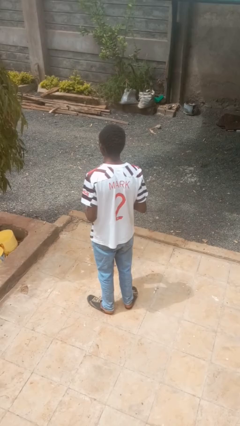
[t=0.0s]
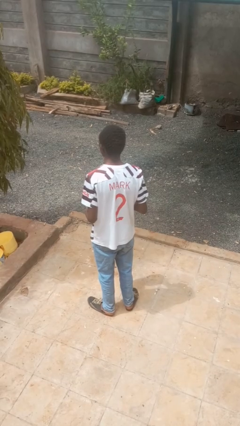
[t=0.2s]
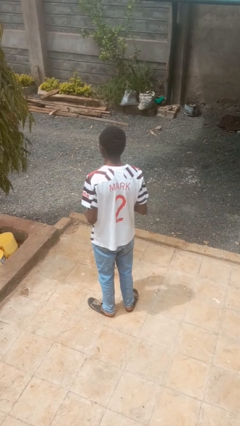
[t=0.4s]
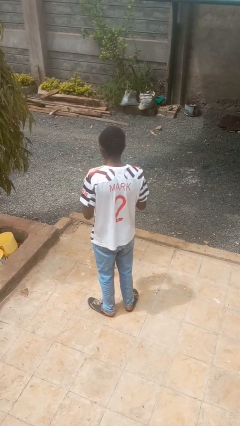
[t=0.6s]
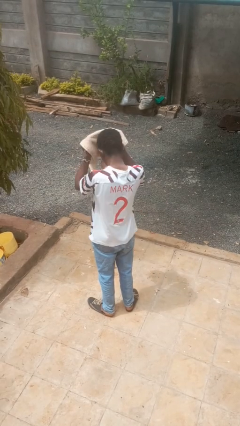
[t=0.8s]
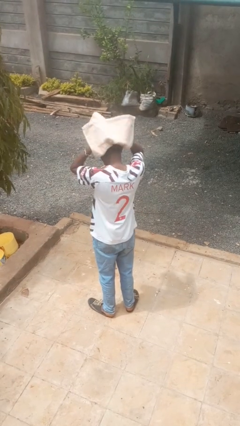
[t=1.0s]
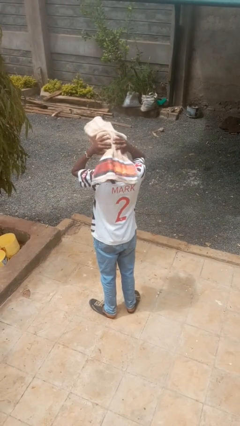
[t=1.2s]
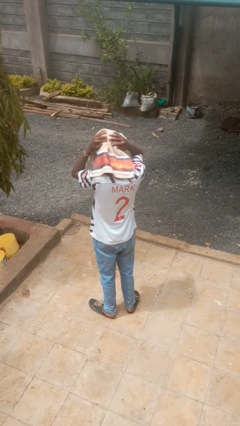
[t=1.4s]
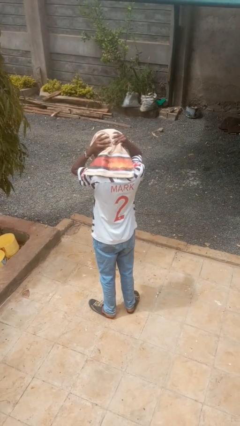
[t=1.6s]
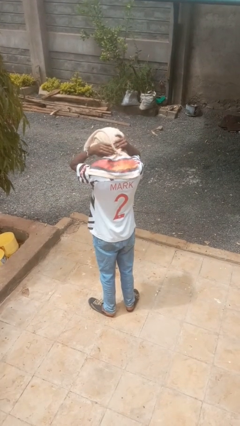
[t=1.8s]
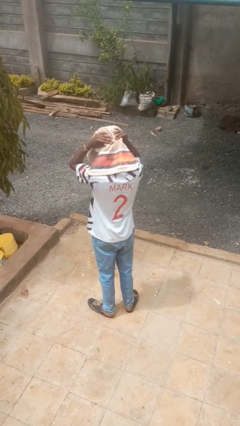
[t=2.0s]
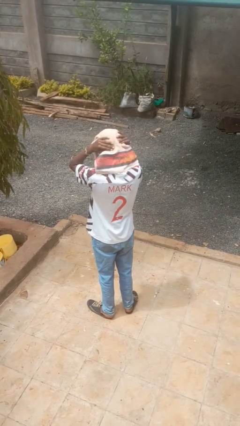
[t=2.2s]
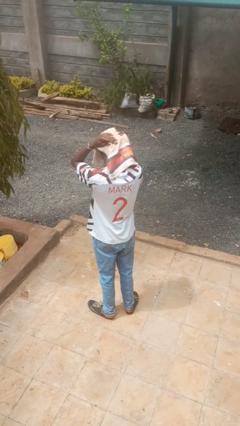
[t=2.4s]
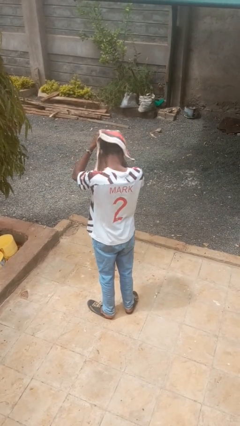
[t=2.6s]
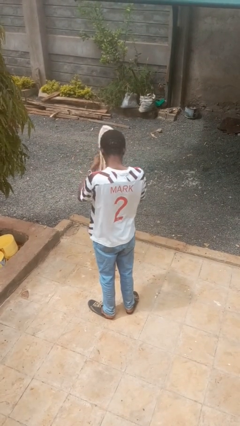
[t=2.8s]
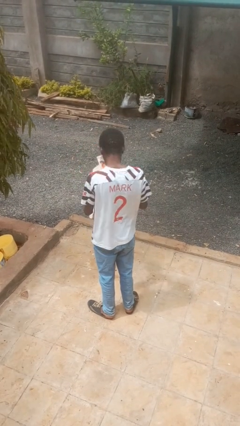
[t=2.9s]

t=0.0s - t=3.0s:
person dries hair with towel

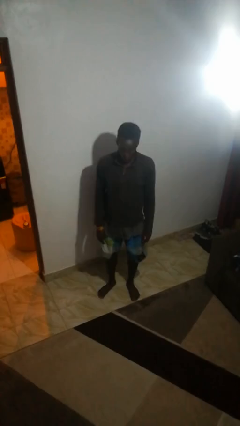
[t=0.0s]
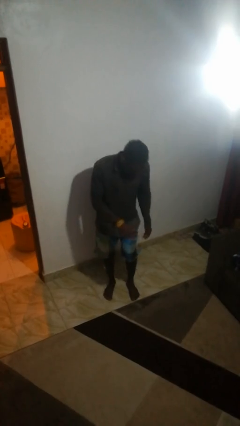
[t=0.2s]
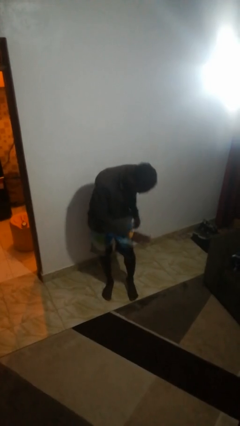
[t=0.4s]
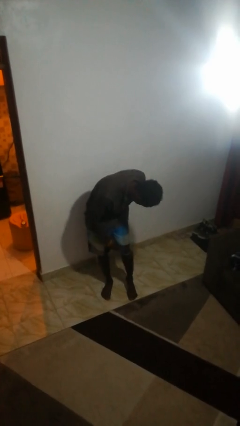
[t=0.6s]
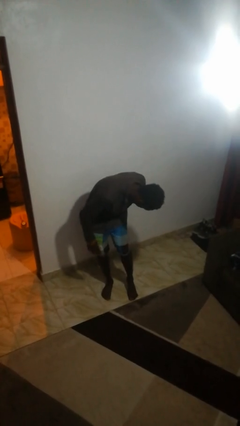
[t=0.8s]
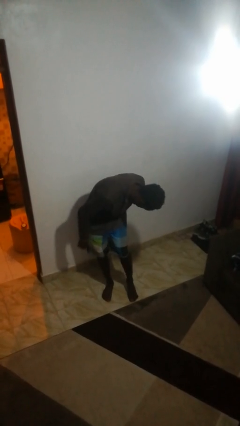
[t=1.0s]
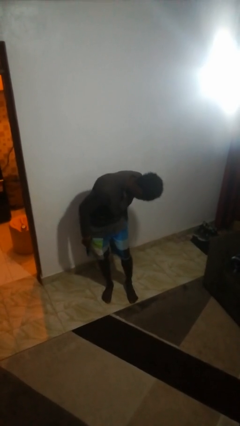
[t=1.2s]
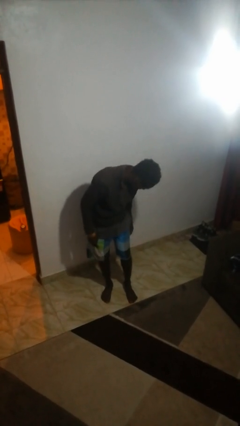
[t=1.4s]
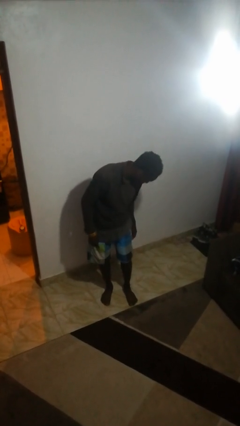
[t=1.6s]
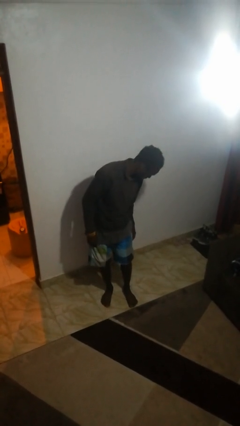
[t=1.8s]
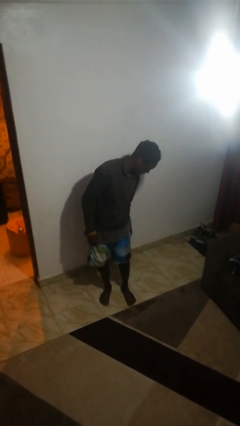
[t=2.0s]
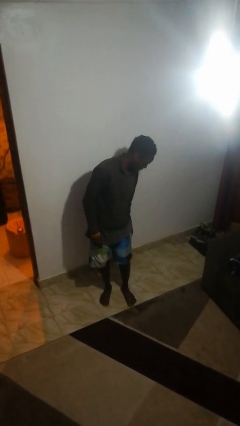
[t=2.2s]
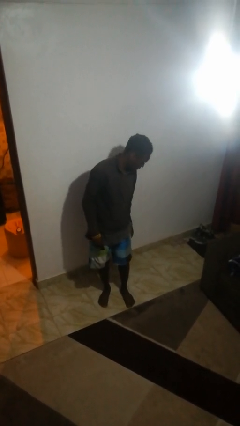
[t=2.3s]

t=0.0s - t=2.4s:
person swats bug

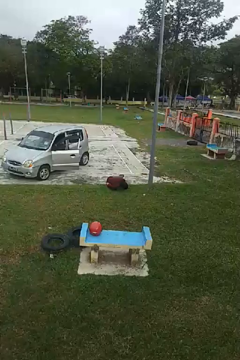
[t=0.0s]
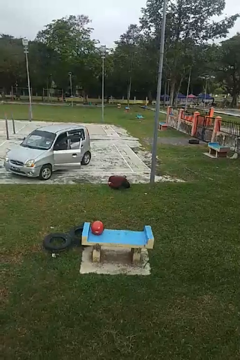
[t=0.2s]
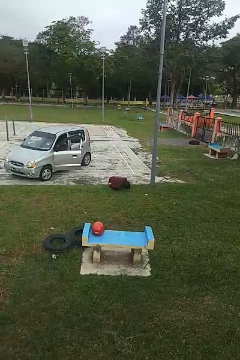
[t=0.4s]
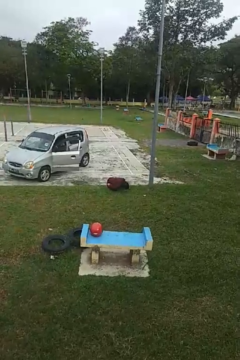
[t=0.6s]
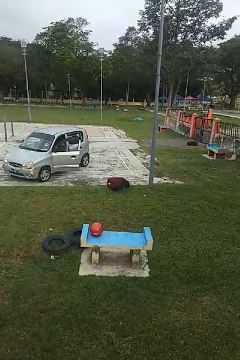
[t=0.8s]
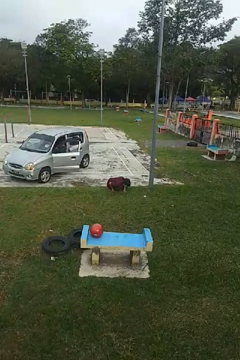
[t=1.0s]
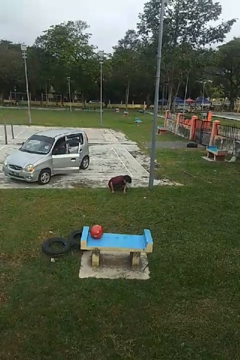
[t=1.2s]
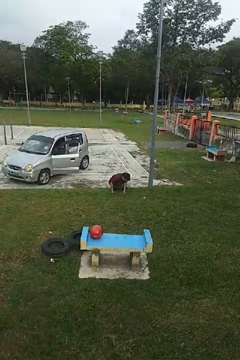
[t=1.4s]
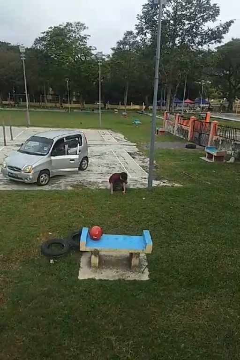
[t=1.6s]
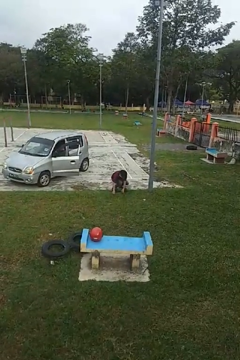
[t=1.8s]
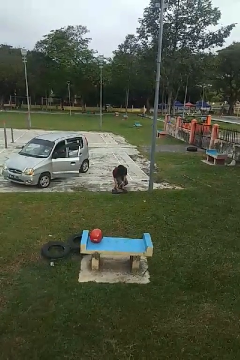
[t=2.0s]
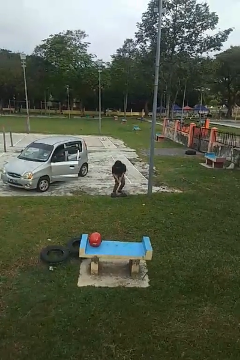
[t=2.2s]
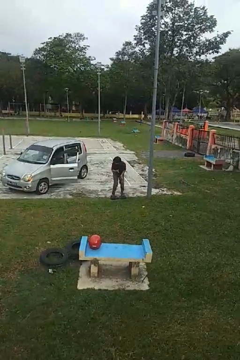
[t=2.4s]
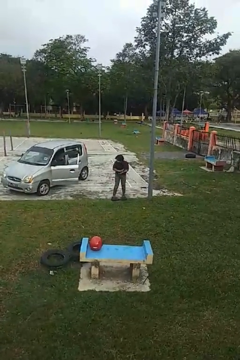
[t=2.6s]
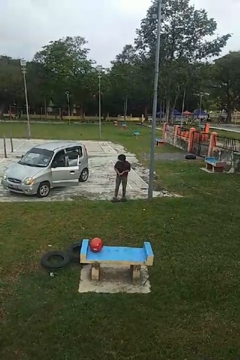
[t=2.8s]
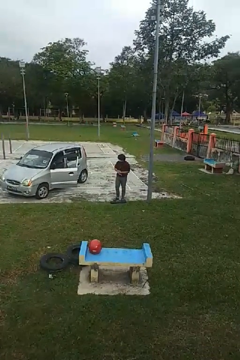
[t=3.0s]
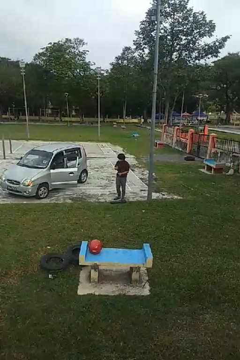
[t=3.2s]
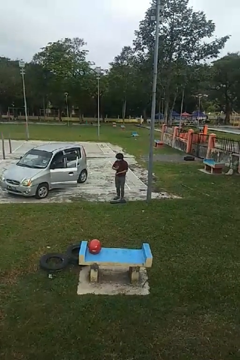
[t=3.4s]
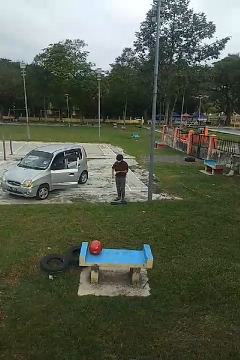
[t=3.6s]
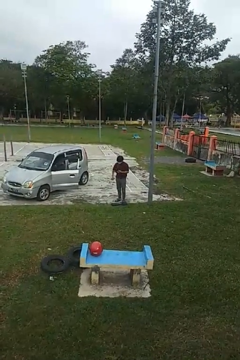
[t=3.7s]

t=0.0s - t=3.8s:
person stands up from floor

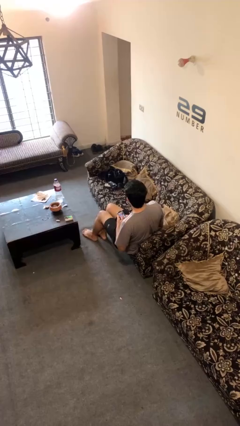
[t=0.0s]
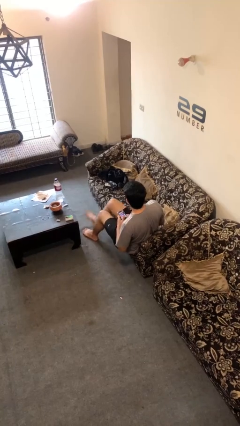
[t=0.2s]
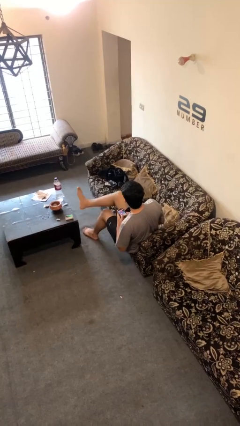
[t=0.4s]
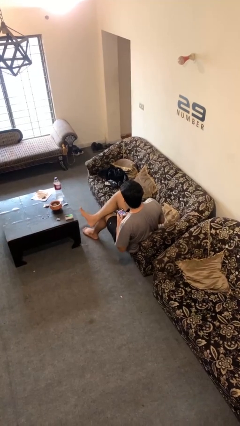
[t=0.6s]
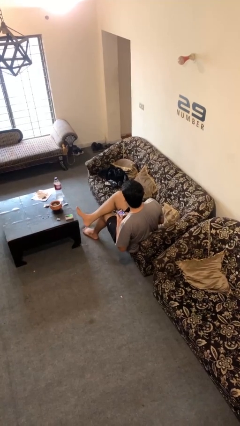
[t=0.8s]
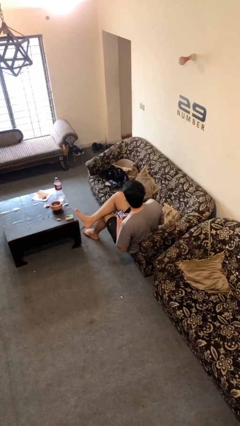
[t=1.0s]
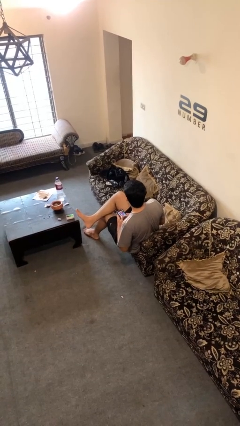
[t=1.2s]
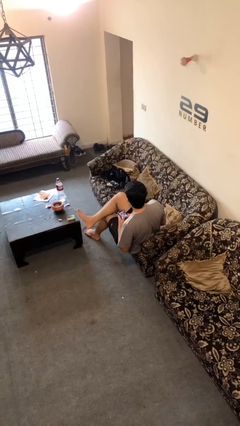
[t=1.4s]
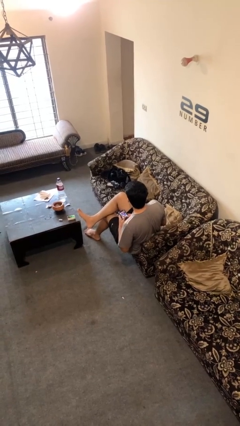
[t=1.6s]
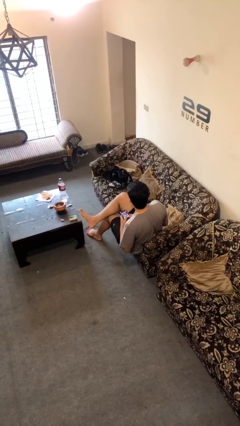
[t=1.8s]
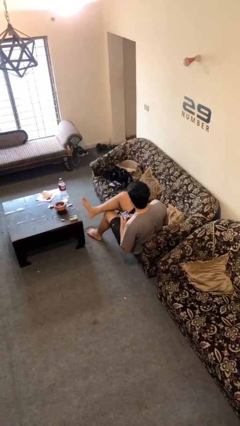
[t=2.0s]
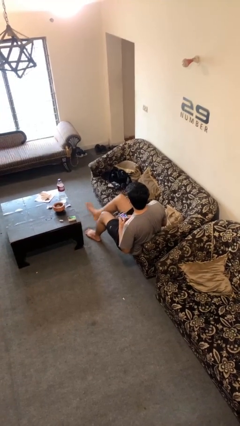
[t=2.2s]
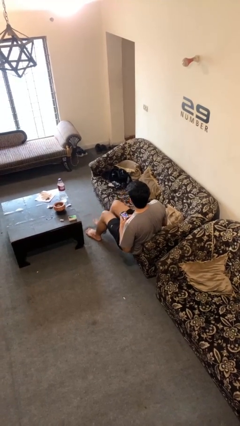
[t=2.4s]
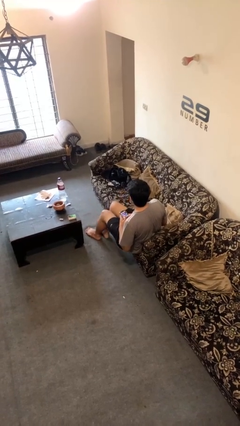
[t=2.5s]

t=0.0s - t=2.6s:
person crosses legs

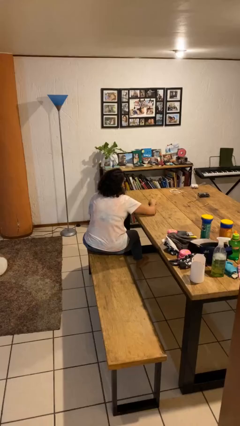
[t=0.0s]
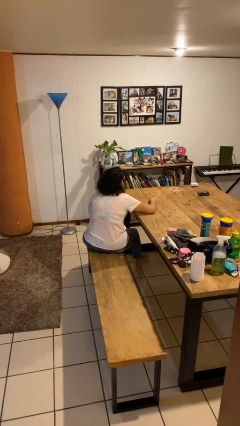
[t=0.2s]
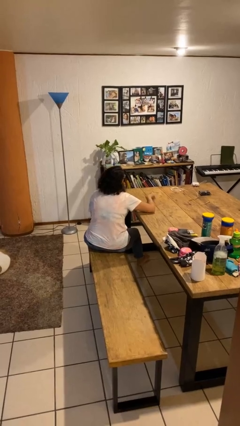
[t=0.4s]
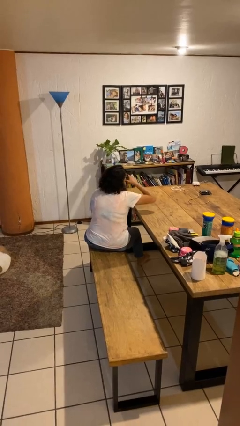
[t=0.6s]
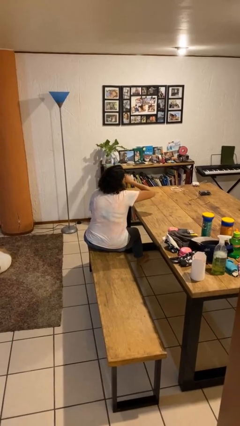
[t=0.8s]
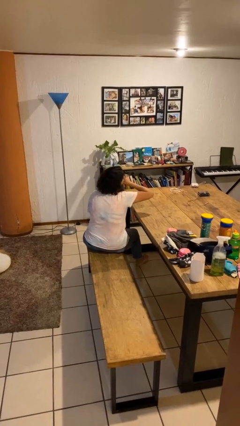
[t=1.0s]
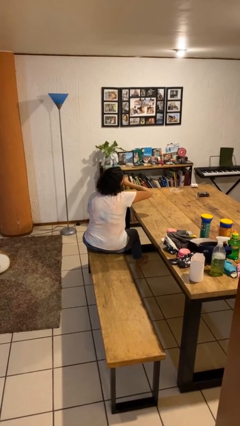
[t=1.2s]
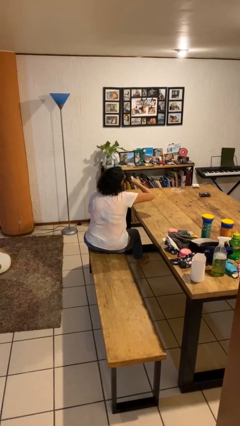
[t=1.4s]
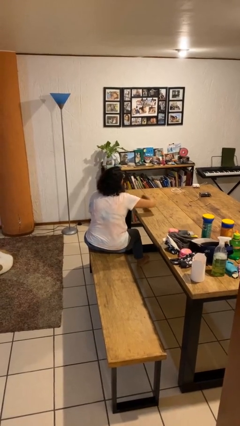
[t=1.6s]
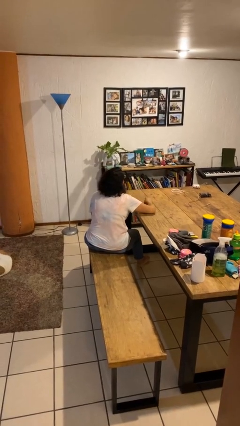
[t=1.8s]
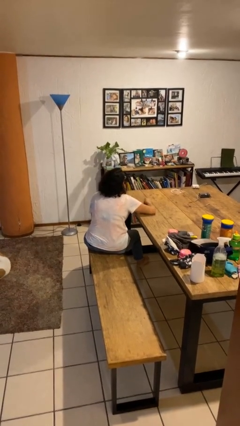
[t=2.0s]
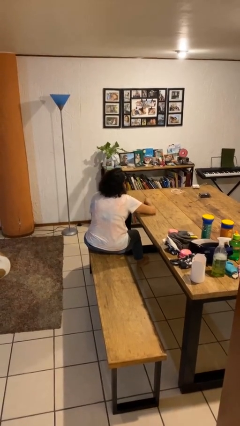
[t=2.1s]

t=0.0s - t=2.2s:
person licks fingers

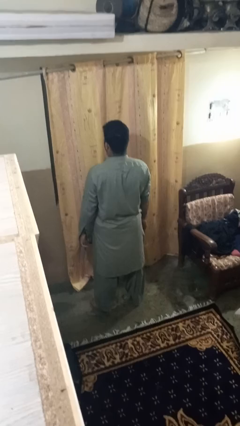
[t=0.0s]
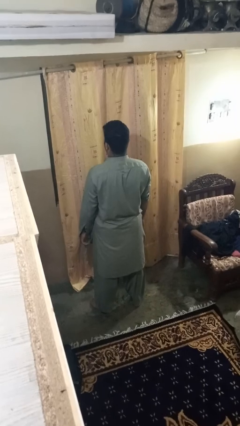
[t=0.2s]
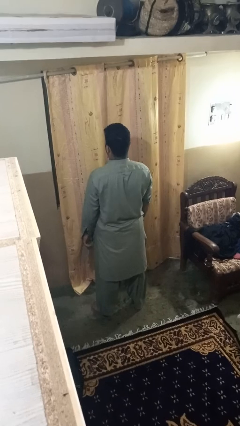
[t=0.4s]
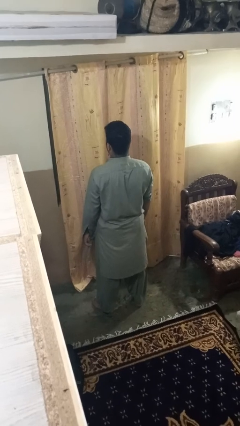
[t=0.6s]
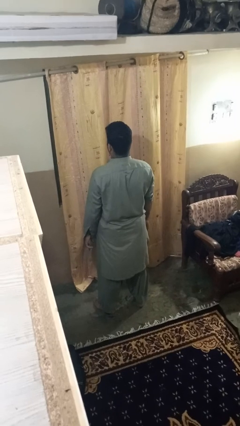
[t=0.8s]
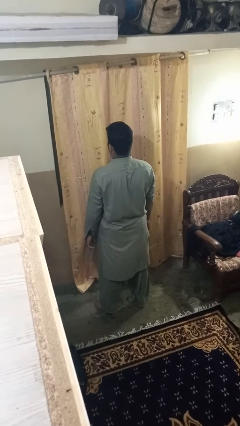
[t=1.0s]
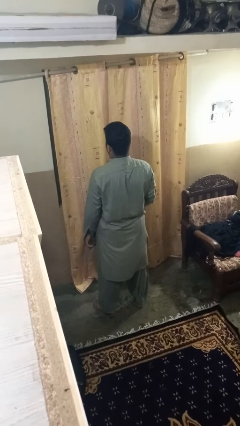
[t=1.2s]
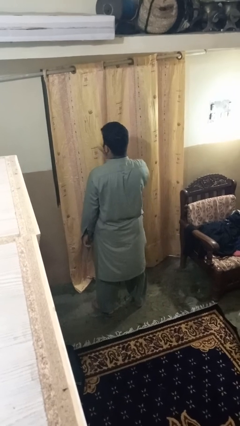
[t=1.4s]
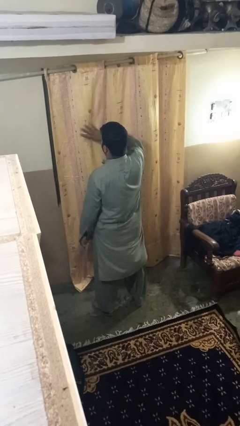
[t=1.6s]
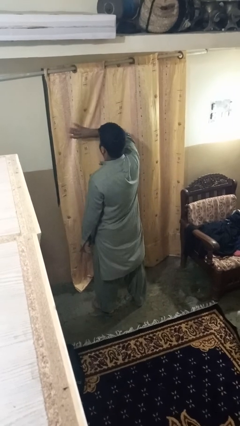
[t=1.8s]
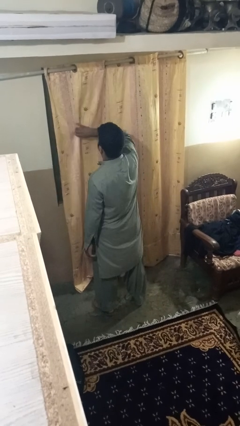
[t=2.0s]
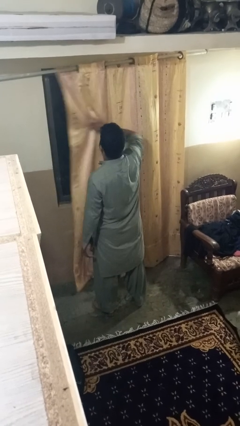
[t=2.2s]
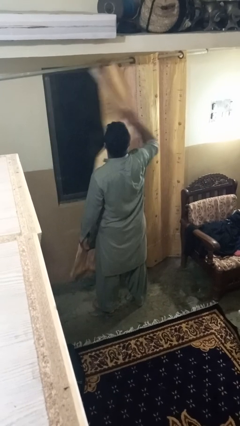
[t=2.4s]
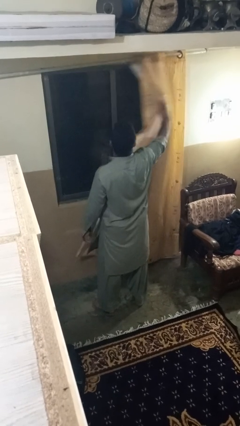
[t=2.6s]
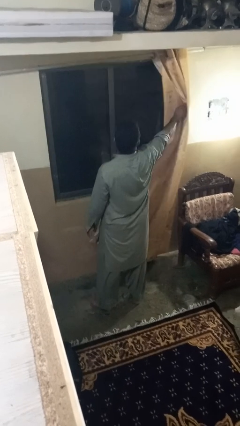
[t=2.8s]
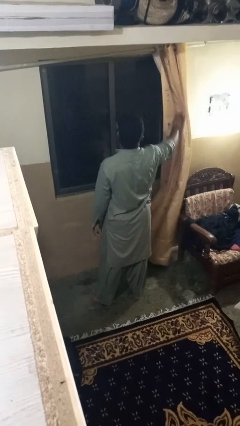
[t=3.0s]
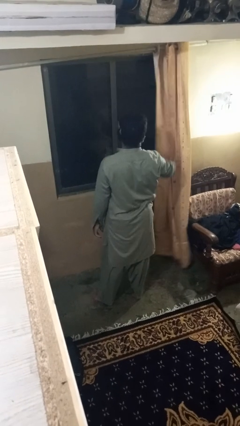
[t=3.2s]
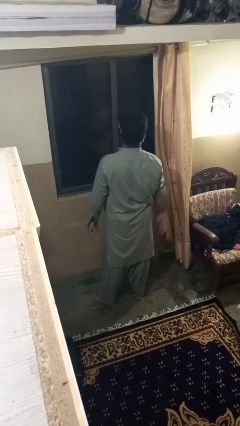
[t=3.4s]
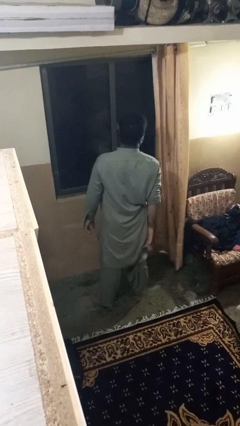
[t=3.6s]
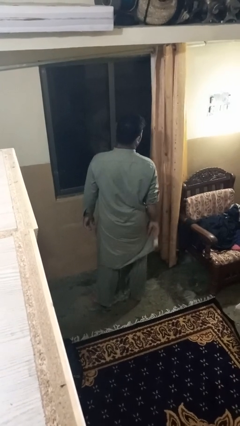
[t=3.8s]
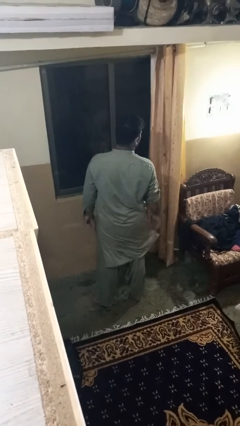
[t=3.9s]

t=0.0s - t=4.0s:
person opens curtains

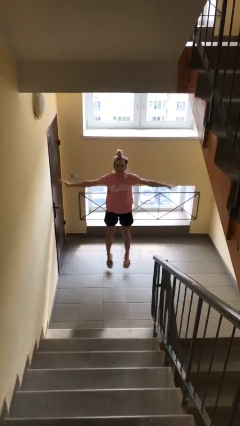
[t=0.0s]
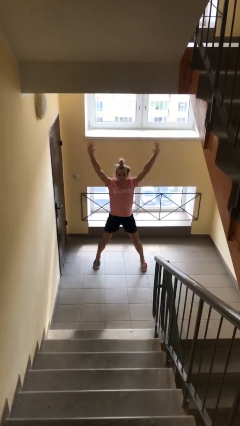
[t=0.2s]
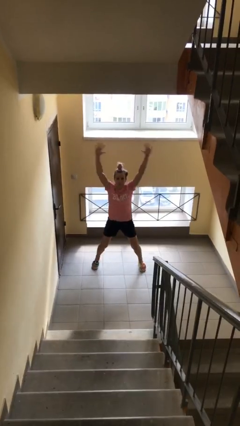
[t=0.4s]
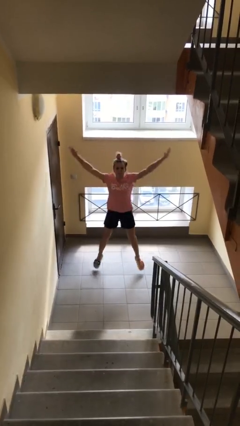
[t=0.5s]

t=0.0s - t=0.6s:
person exercises with jumping jacks
